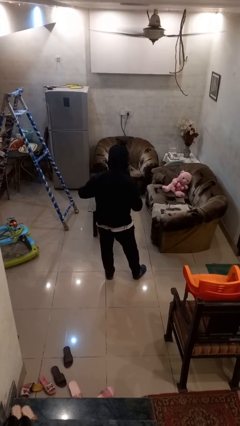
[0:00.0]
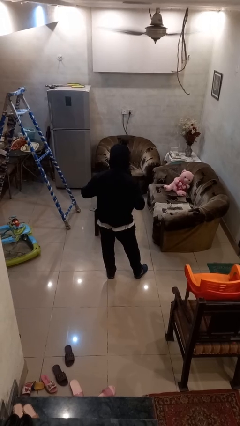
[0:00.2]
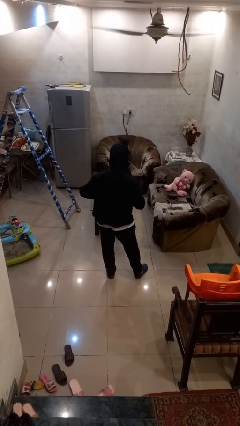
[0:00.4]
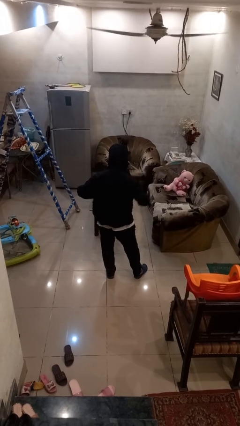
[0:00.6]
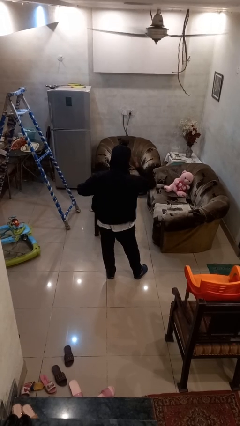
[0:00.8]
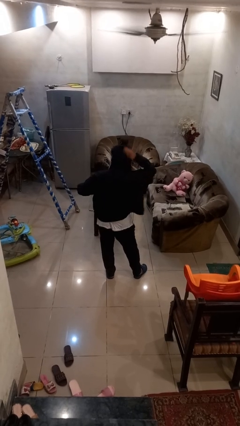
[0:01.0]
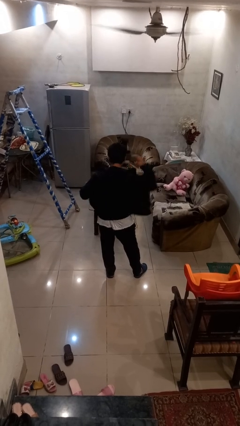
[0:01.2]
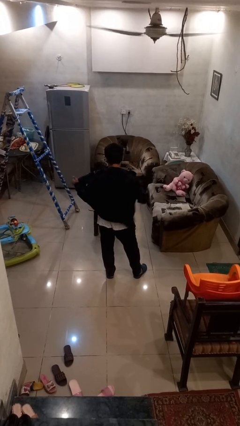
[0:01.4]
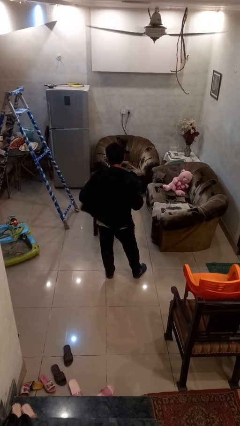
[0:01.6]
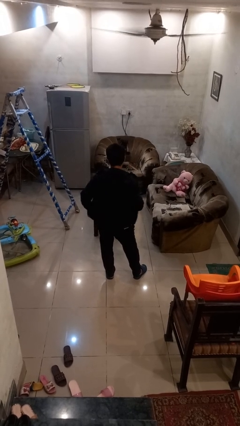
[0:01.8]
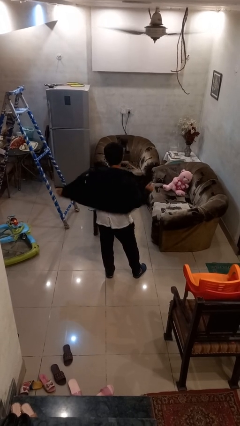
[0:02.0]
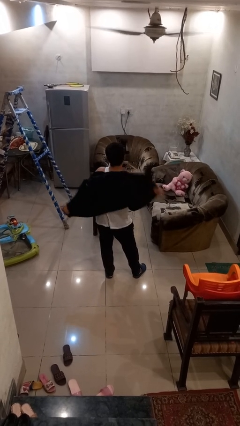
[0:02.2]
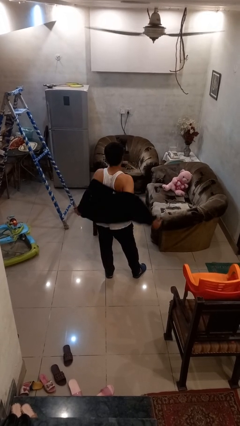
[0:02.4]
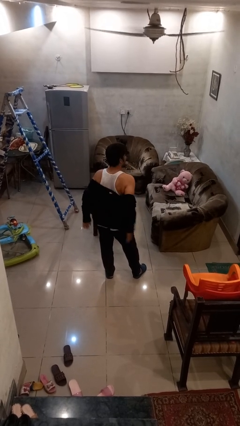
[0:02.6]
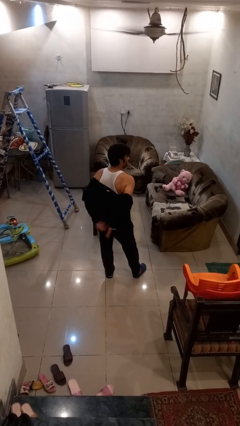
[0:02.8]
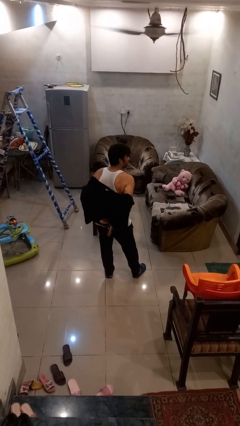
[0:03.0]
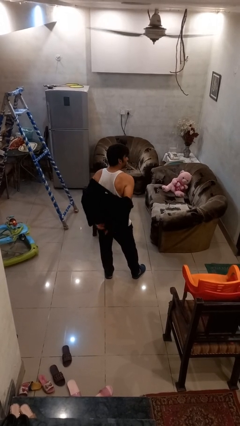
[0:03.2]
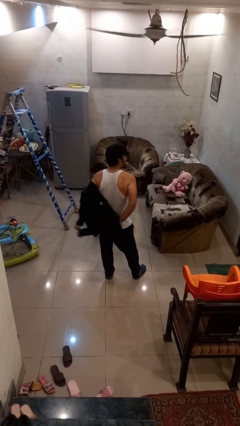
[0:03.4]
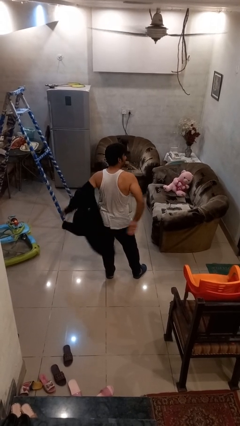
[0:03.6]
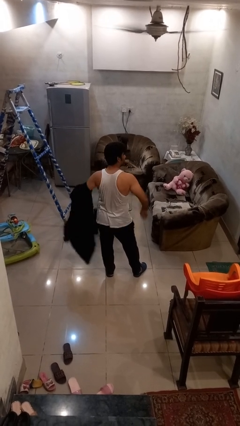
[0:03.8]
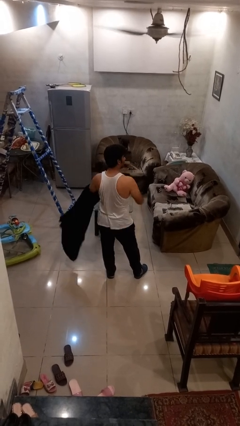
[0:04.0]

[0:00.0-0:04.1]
person takes off hoodie

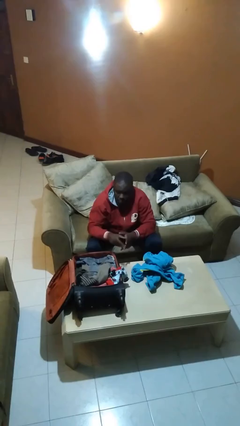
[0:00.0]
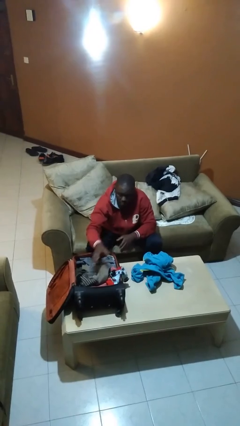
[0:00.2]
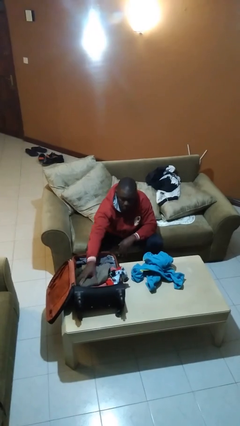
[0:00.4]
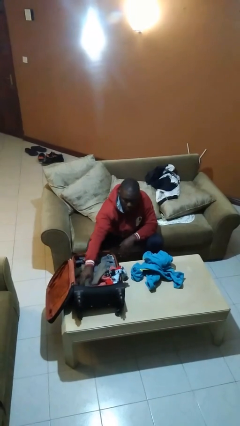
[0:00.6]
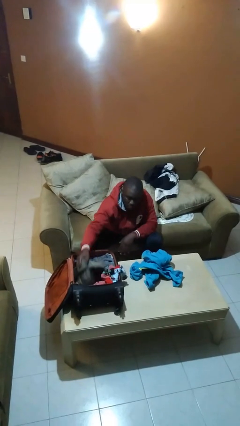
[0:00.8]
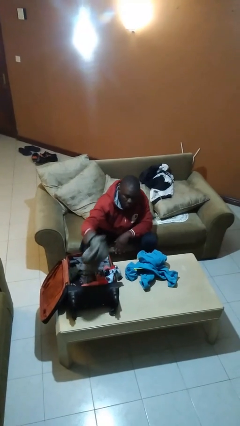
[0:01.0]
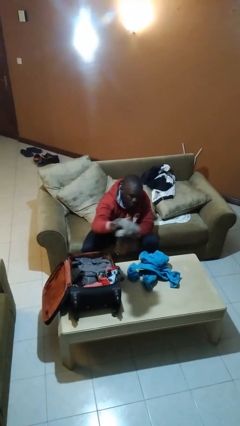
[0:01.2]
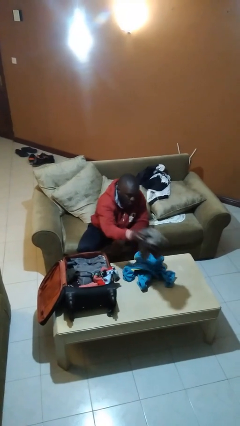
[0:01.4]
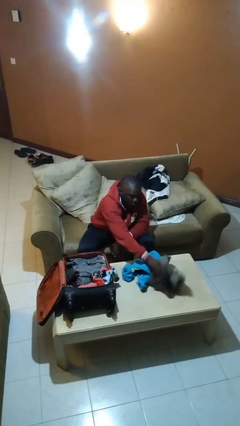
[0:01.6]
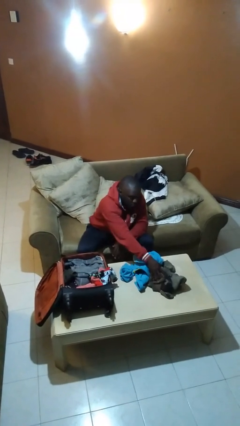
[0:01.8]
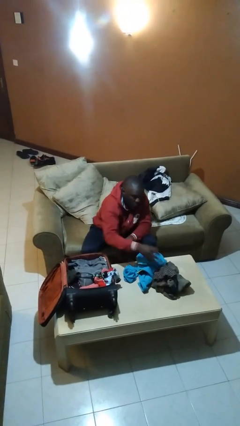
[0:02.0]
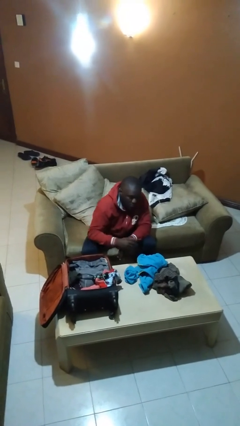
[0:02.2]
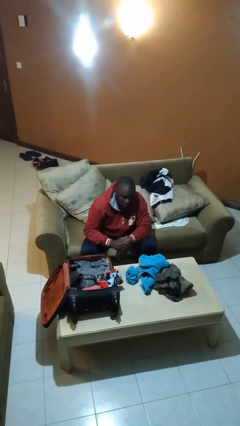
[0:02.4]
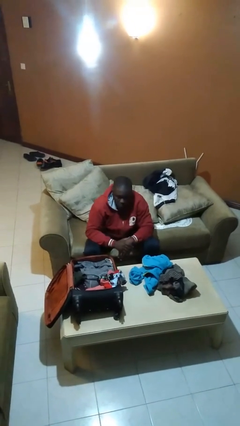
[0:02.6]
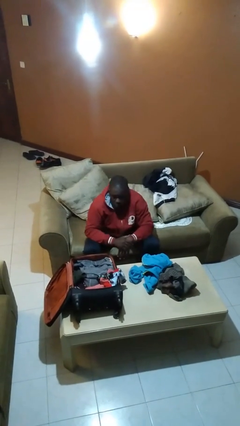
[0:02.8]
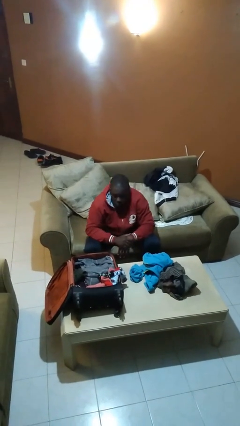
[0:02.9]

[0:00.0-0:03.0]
person unloads clothes from suitcase

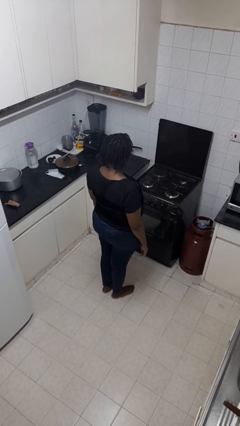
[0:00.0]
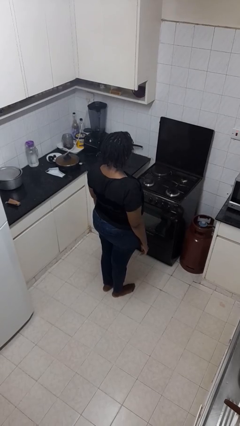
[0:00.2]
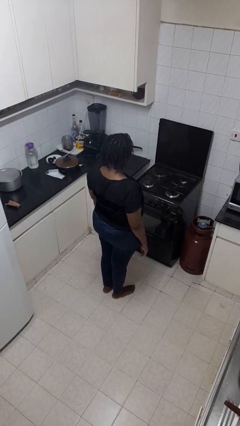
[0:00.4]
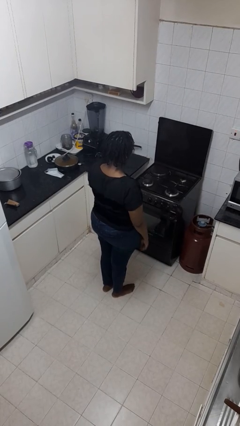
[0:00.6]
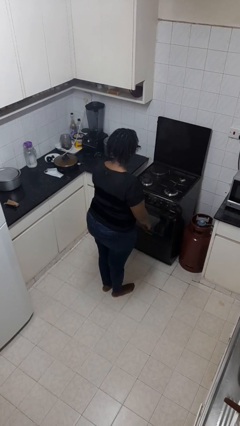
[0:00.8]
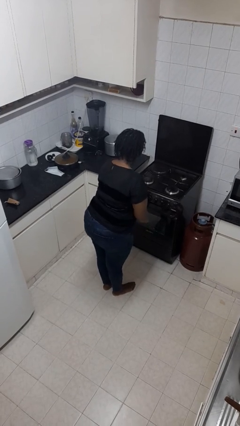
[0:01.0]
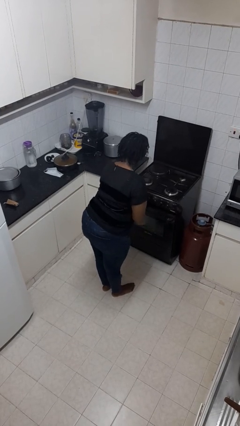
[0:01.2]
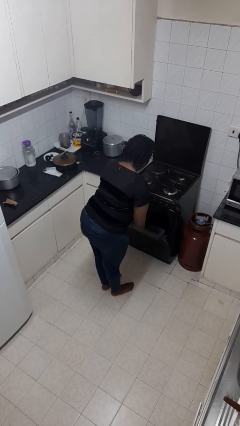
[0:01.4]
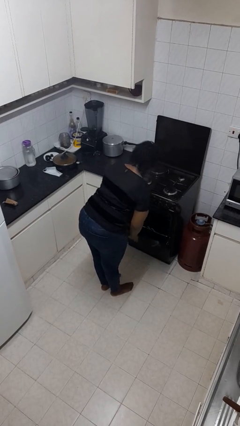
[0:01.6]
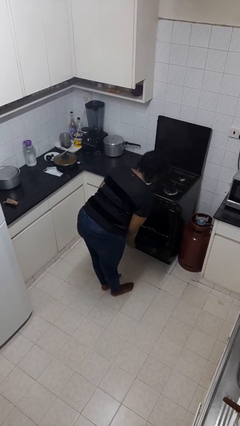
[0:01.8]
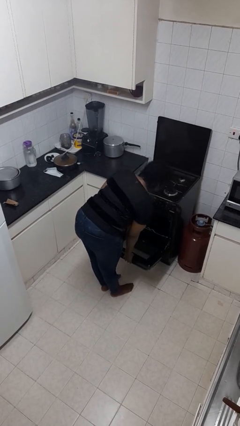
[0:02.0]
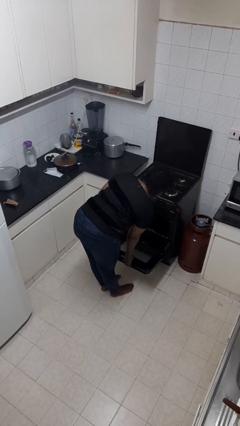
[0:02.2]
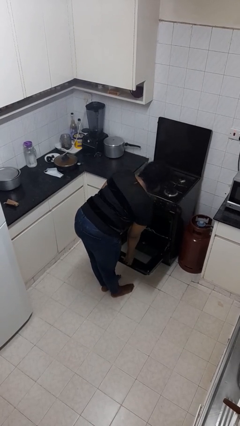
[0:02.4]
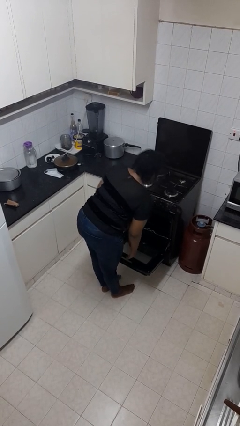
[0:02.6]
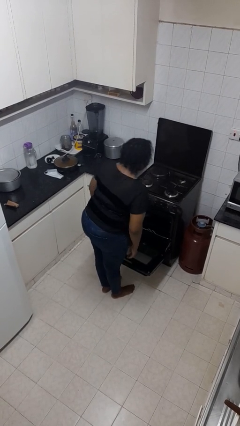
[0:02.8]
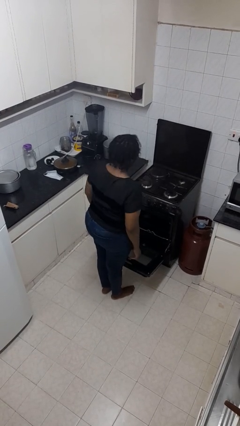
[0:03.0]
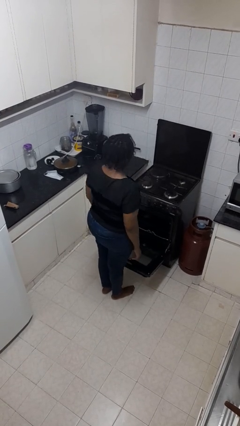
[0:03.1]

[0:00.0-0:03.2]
person opens oven door

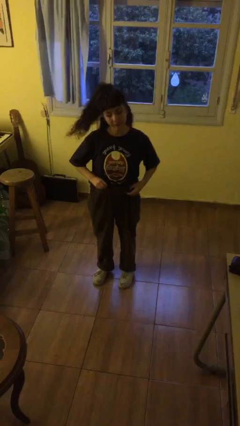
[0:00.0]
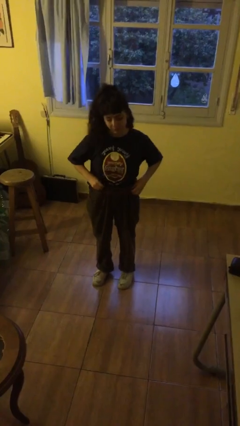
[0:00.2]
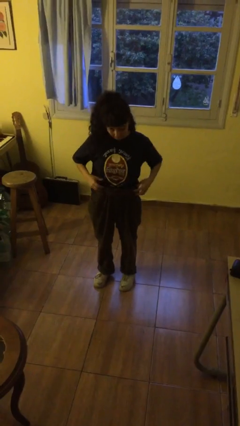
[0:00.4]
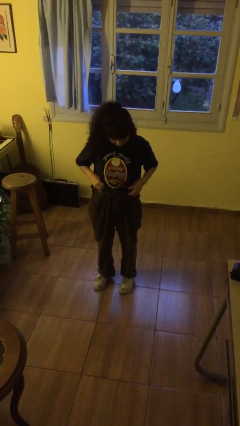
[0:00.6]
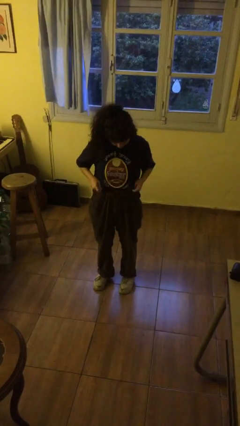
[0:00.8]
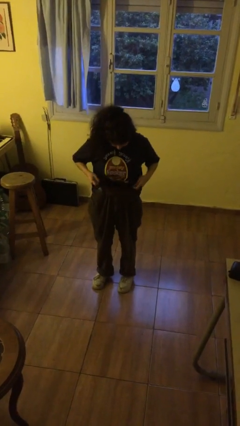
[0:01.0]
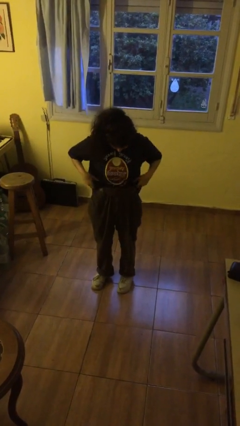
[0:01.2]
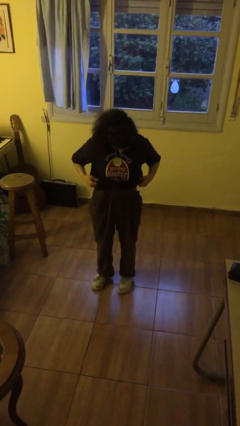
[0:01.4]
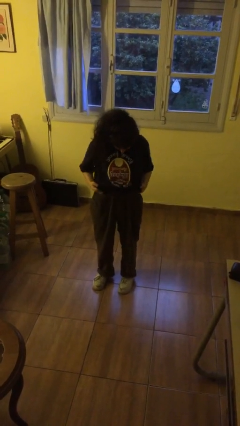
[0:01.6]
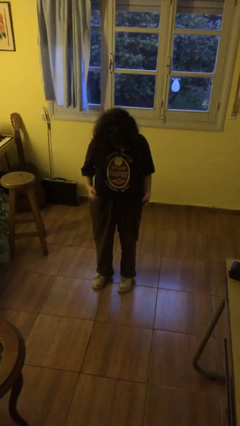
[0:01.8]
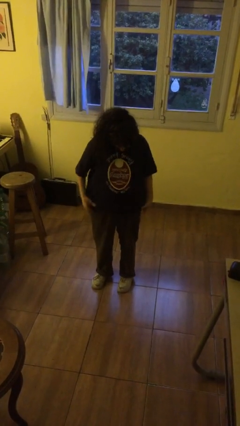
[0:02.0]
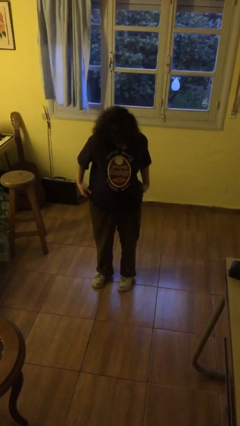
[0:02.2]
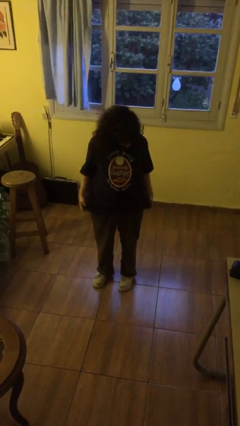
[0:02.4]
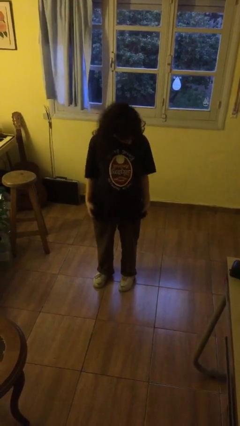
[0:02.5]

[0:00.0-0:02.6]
person untucks shirt

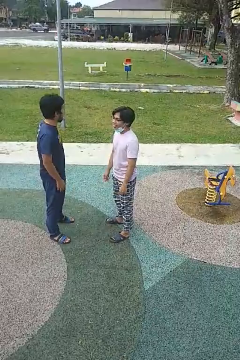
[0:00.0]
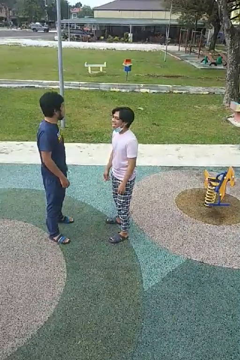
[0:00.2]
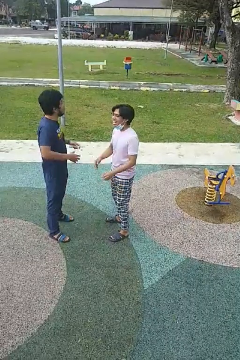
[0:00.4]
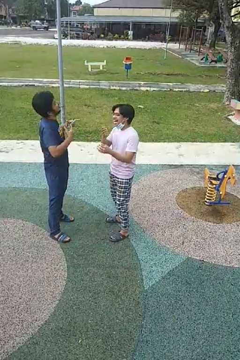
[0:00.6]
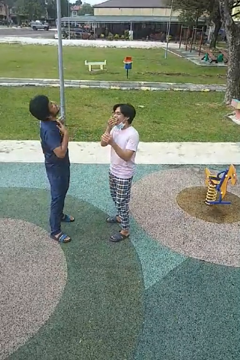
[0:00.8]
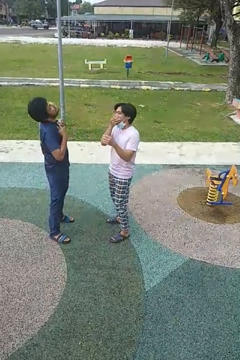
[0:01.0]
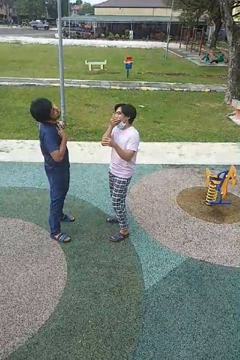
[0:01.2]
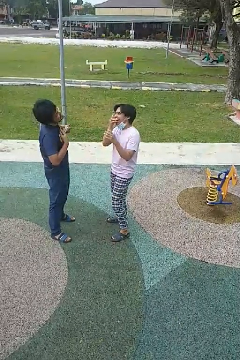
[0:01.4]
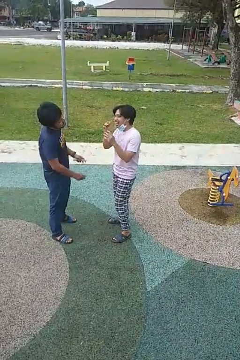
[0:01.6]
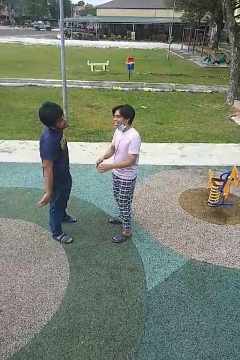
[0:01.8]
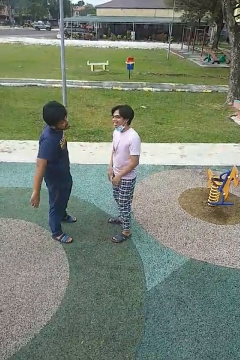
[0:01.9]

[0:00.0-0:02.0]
person laughs with person

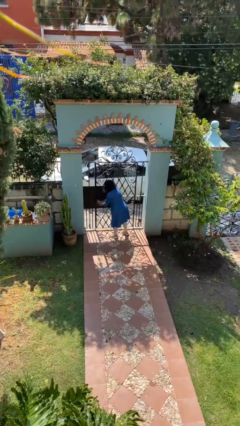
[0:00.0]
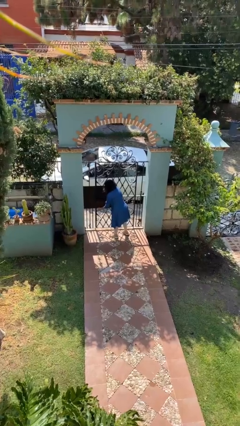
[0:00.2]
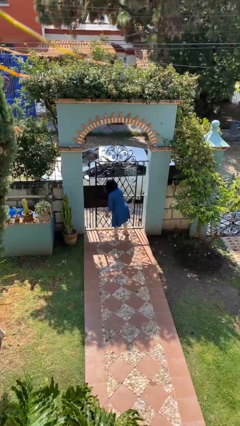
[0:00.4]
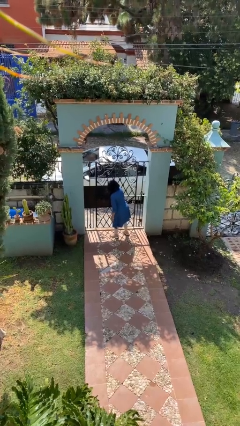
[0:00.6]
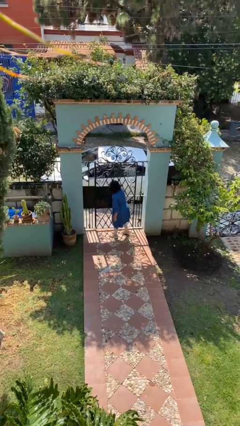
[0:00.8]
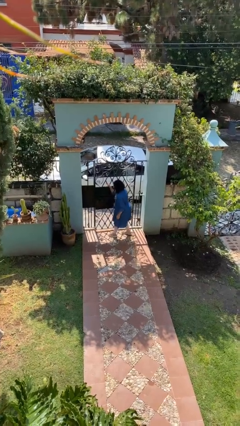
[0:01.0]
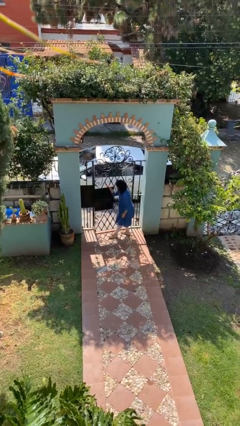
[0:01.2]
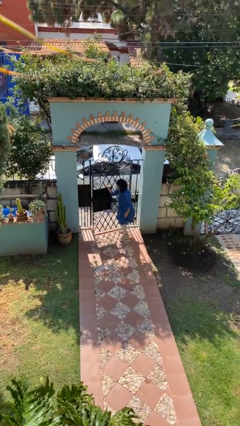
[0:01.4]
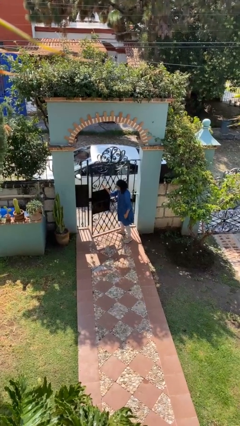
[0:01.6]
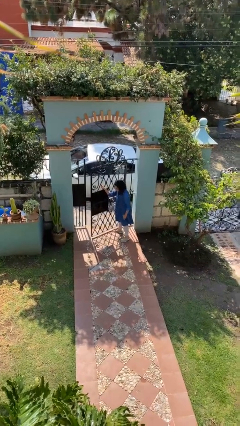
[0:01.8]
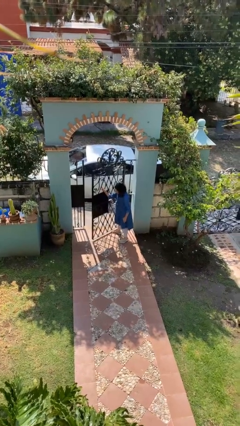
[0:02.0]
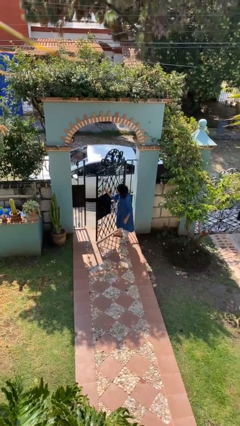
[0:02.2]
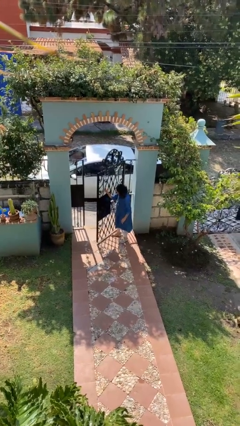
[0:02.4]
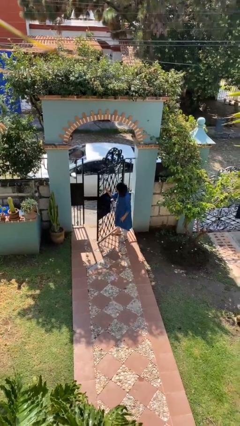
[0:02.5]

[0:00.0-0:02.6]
person opens facility door

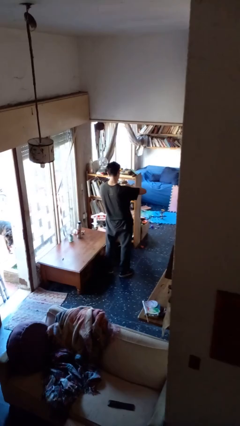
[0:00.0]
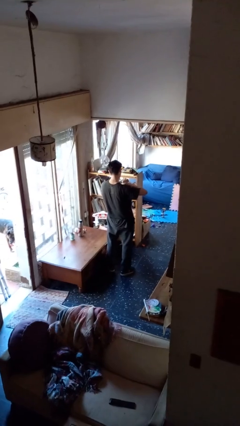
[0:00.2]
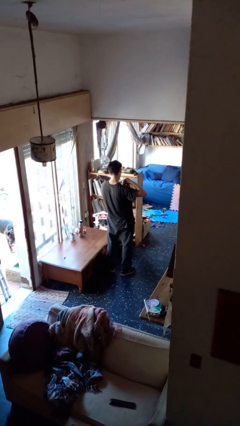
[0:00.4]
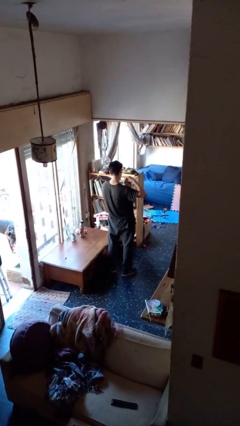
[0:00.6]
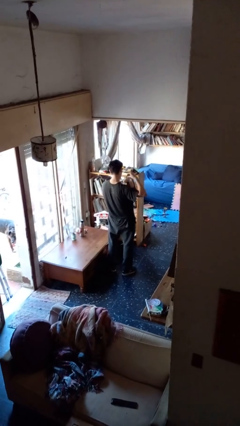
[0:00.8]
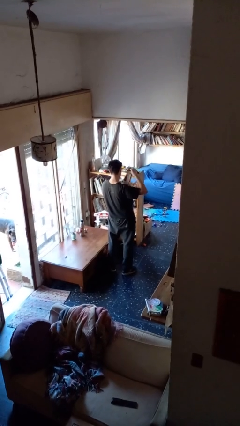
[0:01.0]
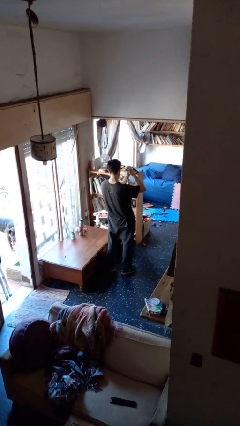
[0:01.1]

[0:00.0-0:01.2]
person tears paper
